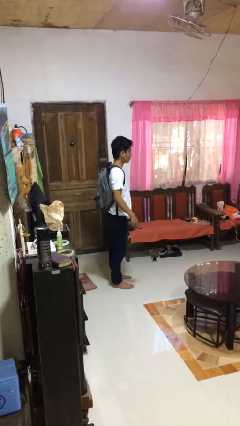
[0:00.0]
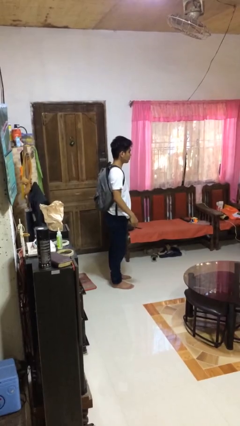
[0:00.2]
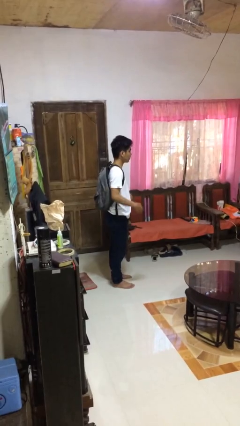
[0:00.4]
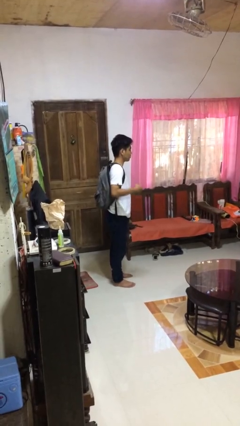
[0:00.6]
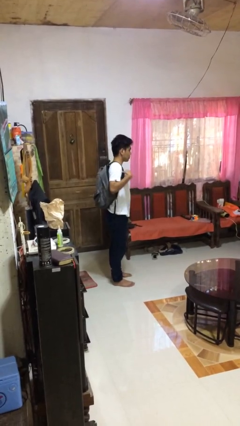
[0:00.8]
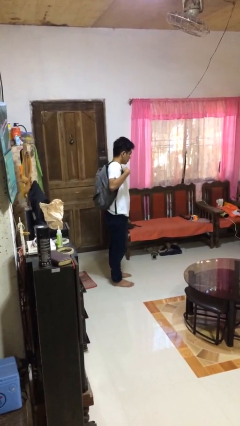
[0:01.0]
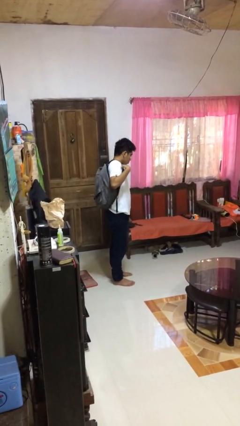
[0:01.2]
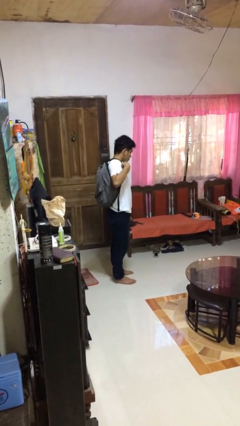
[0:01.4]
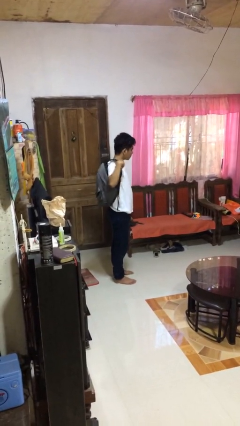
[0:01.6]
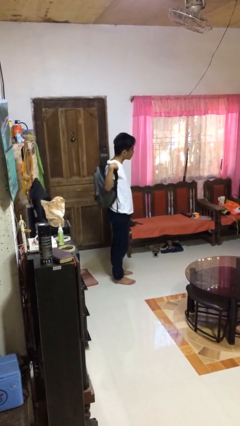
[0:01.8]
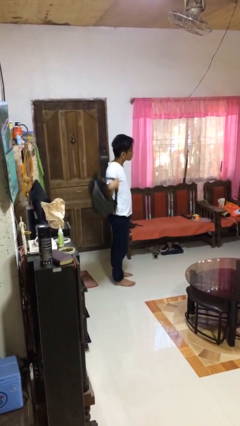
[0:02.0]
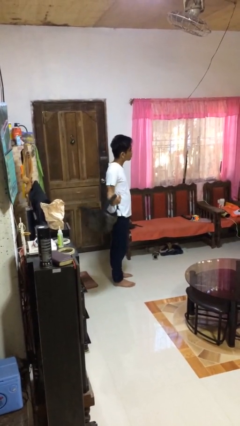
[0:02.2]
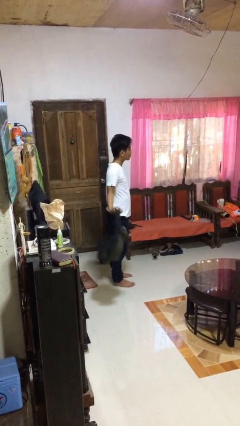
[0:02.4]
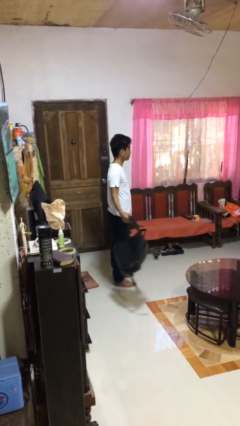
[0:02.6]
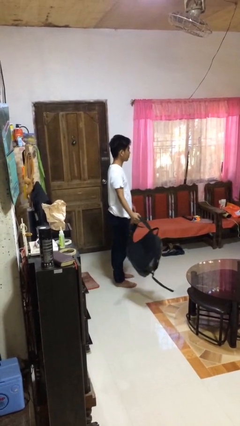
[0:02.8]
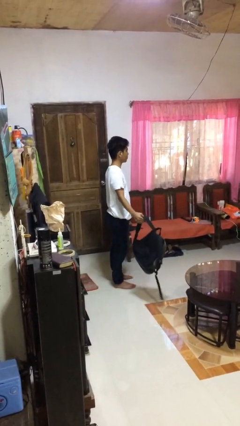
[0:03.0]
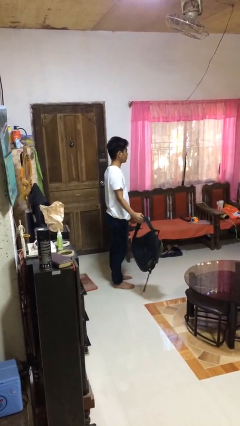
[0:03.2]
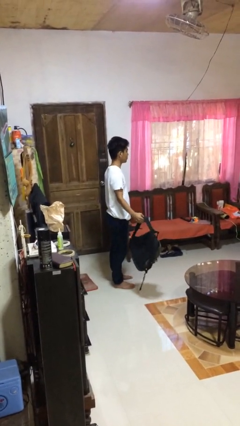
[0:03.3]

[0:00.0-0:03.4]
person takes off backpack

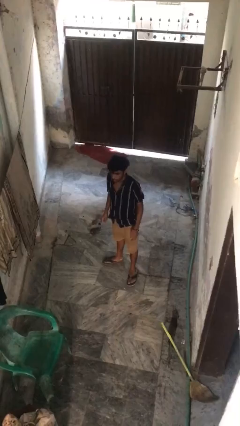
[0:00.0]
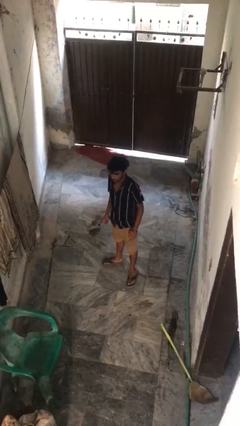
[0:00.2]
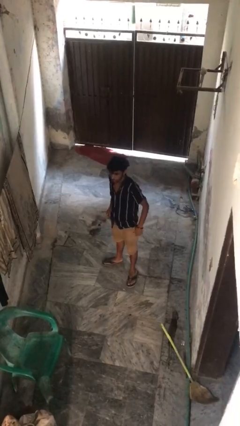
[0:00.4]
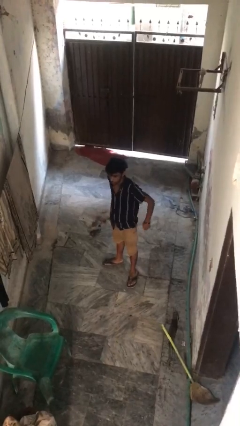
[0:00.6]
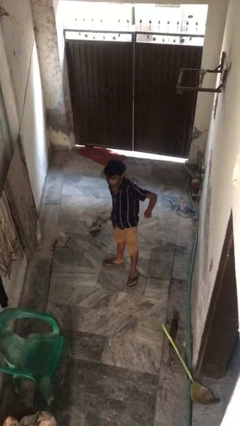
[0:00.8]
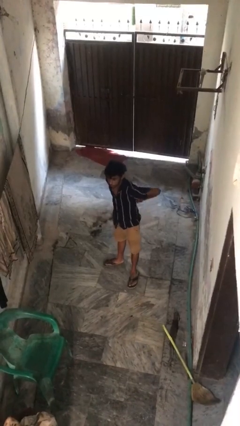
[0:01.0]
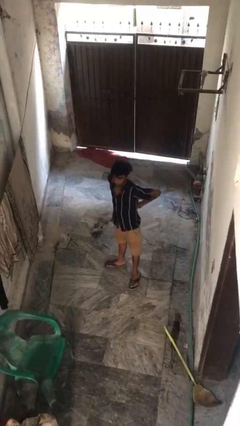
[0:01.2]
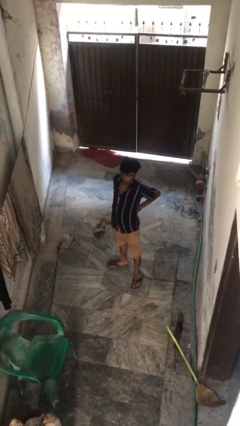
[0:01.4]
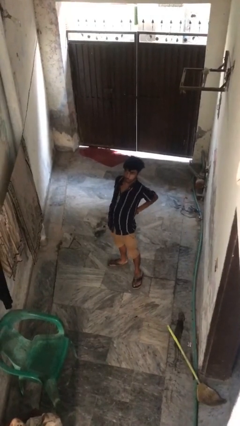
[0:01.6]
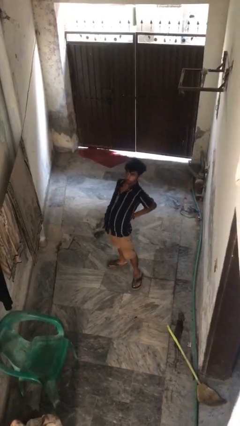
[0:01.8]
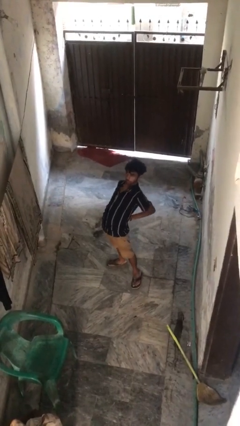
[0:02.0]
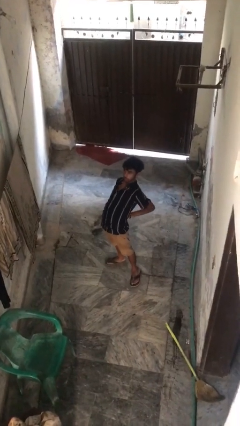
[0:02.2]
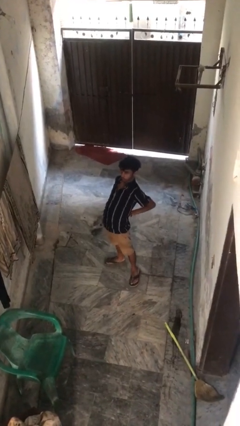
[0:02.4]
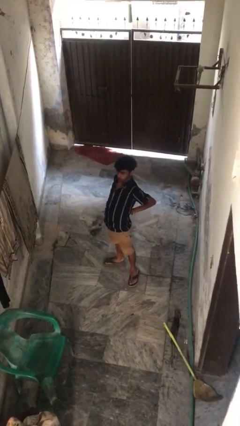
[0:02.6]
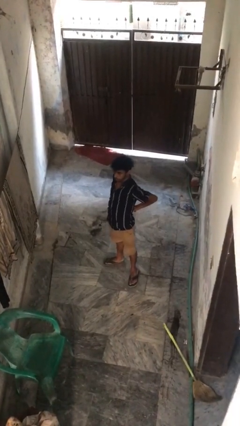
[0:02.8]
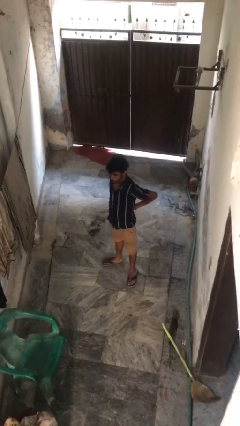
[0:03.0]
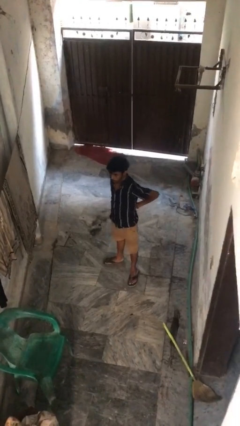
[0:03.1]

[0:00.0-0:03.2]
person stretches back

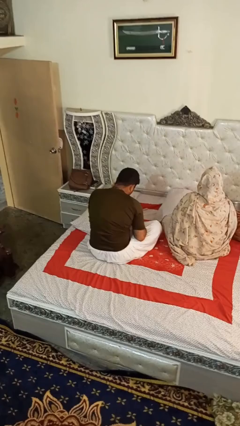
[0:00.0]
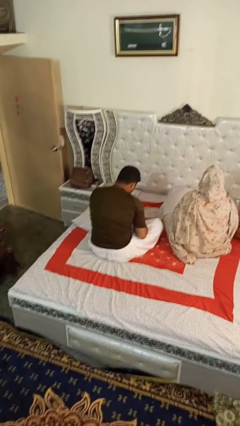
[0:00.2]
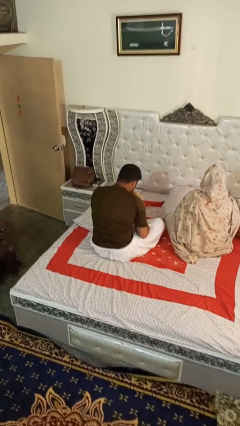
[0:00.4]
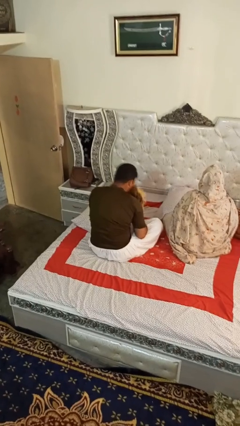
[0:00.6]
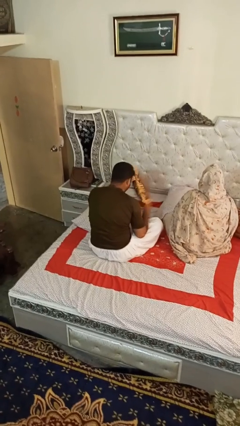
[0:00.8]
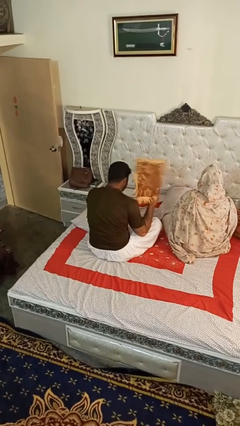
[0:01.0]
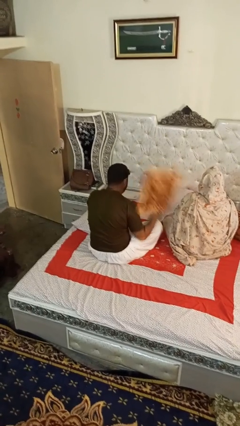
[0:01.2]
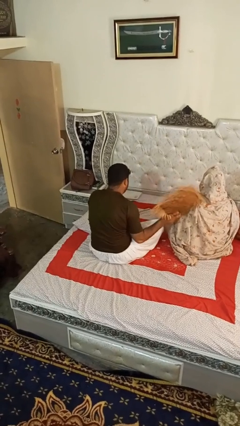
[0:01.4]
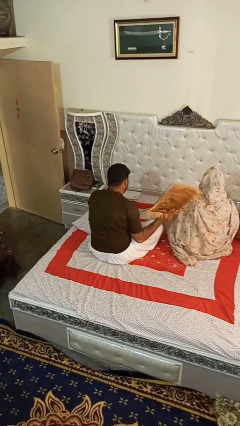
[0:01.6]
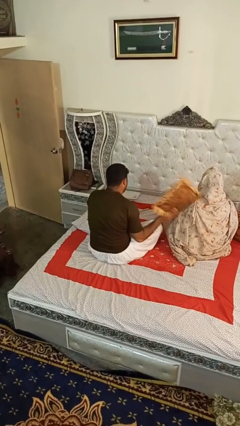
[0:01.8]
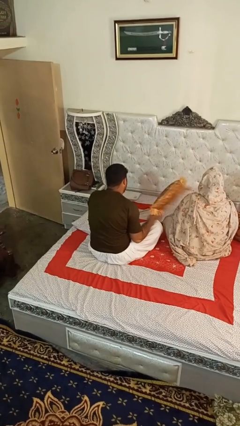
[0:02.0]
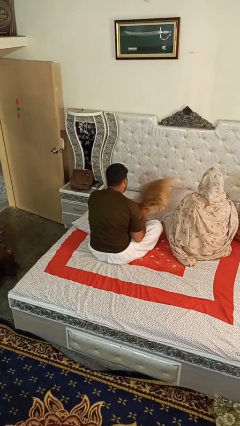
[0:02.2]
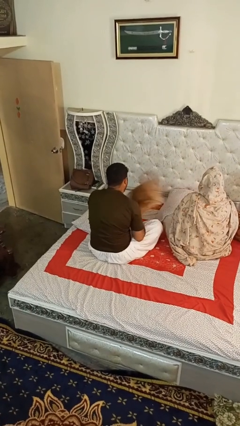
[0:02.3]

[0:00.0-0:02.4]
person hits person with pillow

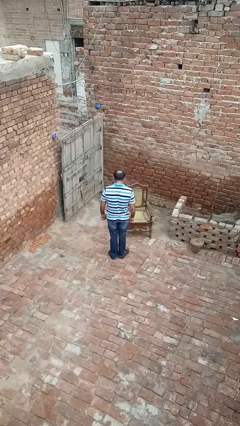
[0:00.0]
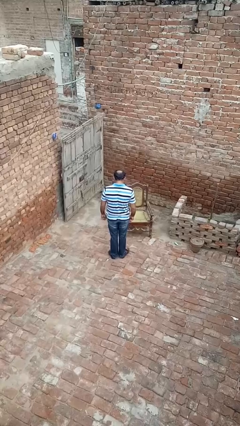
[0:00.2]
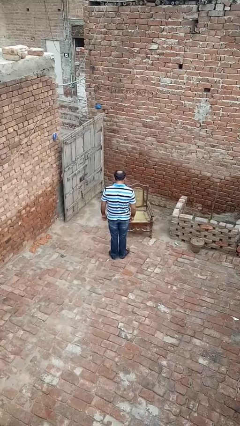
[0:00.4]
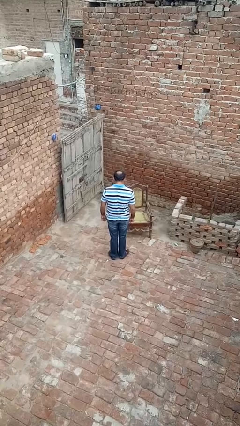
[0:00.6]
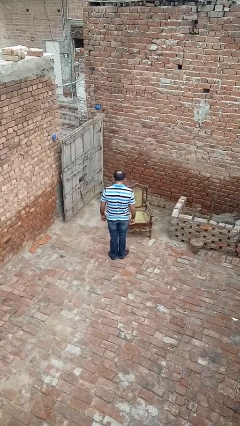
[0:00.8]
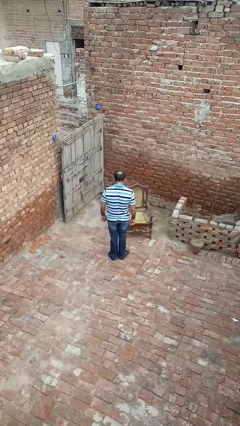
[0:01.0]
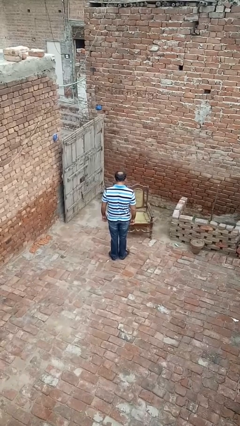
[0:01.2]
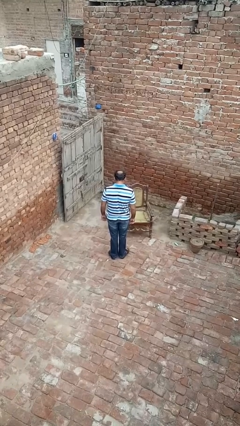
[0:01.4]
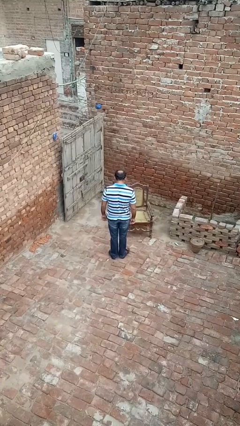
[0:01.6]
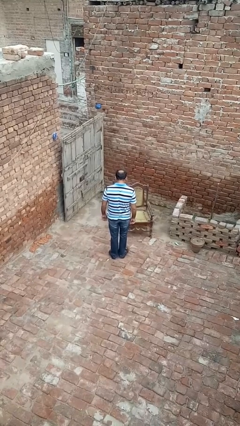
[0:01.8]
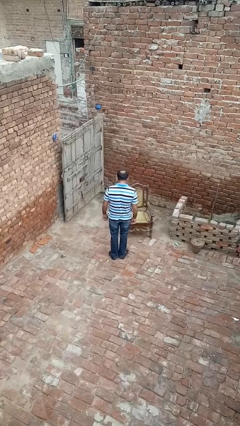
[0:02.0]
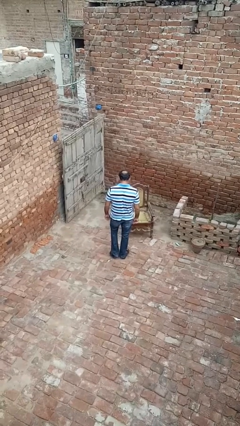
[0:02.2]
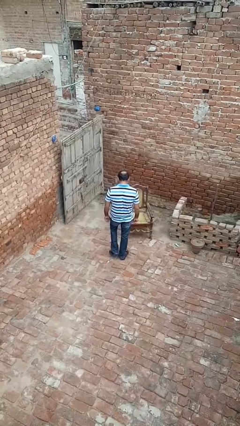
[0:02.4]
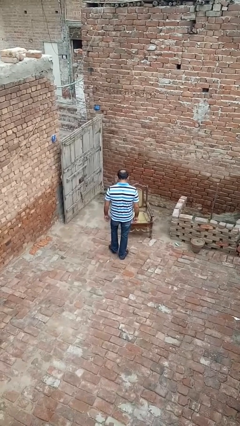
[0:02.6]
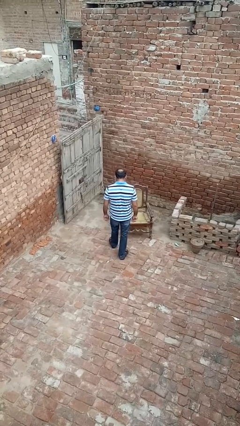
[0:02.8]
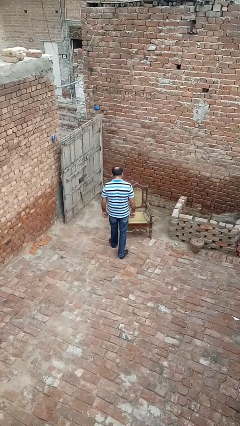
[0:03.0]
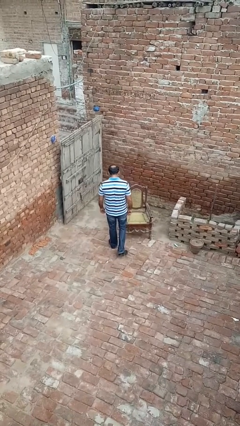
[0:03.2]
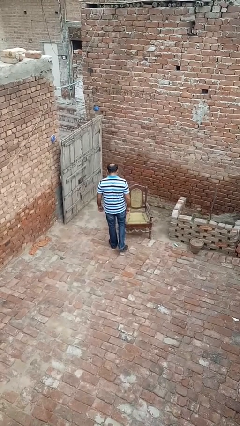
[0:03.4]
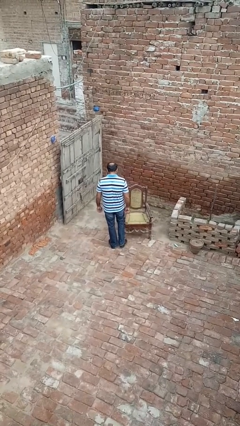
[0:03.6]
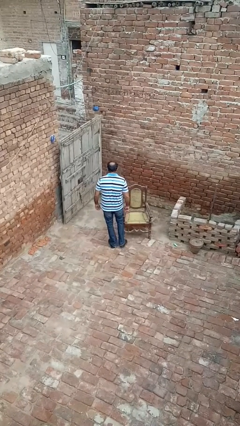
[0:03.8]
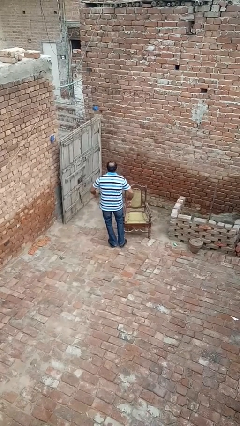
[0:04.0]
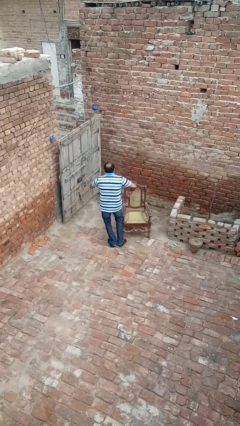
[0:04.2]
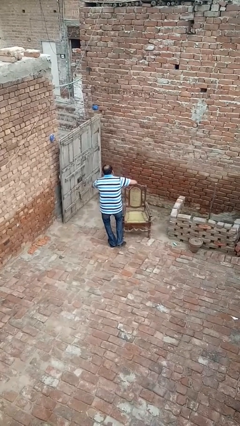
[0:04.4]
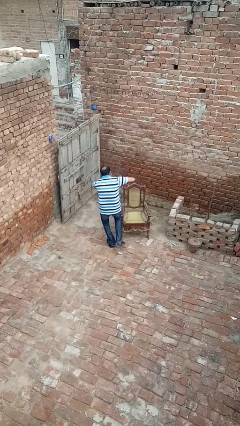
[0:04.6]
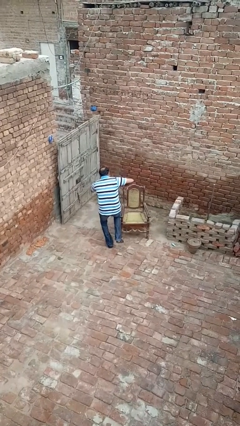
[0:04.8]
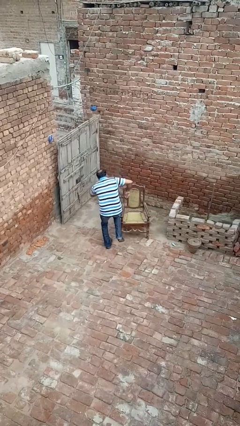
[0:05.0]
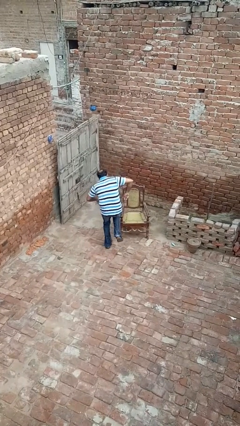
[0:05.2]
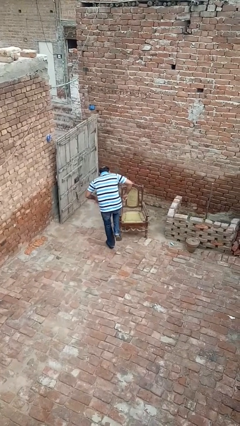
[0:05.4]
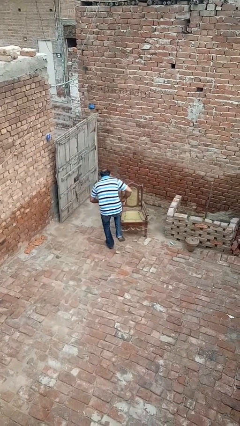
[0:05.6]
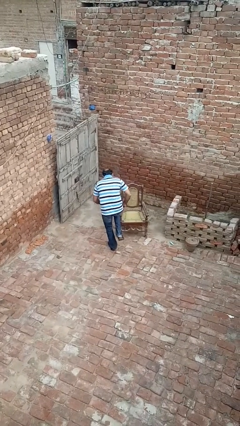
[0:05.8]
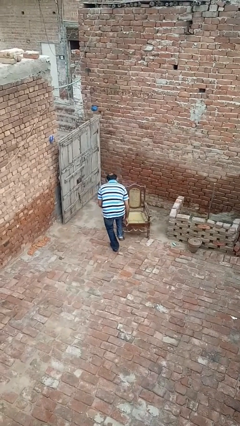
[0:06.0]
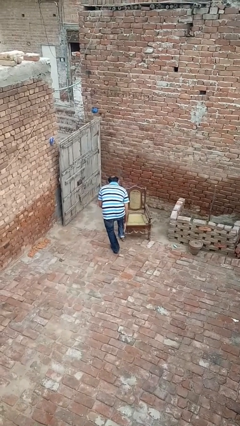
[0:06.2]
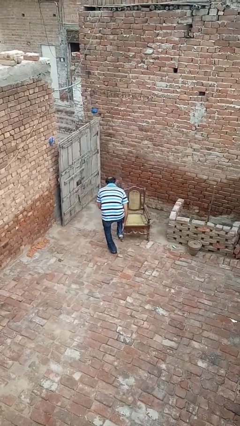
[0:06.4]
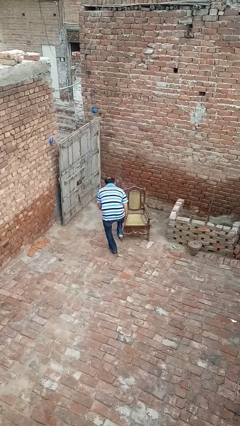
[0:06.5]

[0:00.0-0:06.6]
person stubs toe

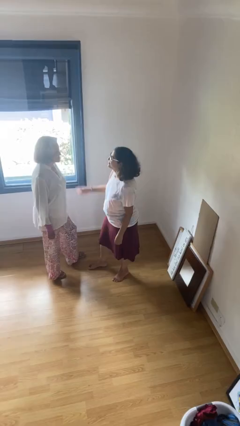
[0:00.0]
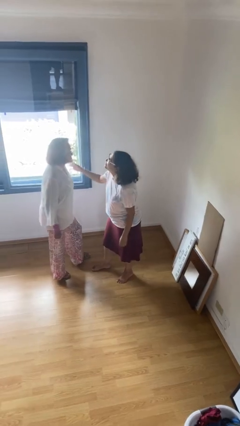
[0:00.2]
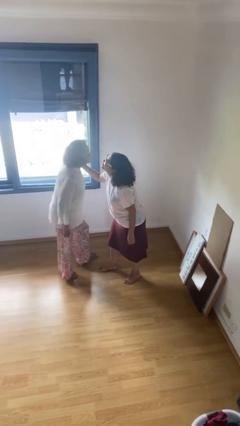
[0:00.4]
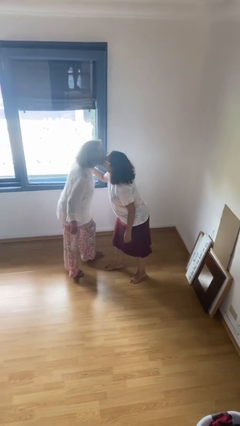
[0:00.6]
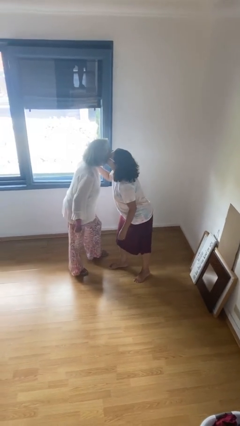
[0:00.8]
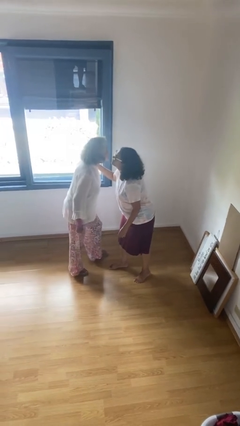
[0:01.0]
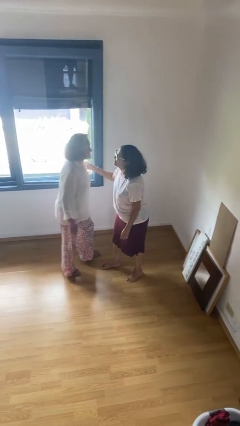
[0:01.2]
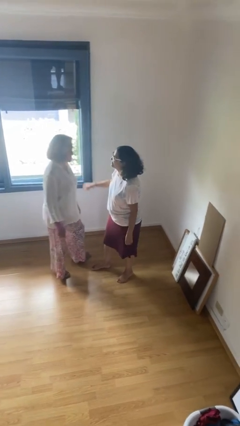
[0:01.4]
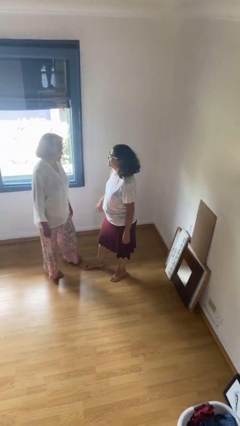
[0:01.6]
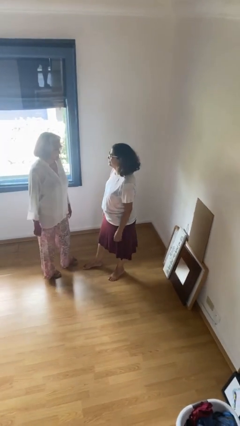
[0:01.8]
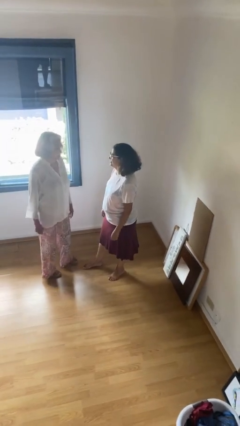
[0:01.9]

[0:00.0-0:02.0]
person kisses cheek of person
